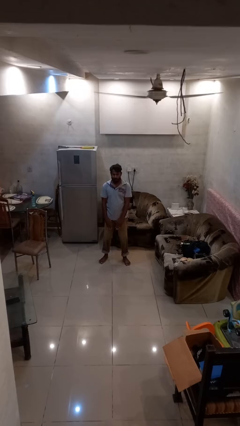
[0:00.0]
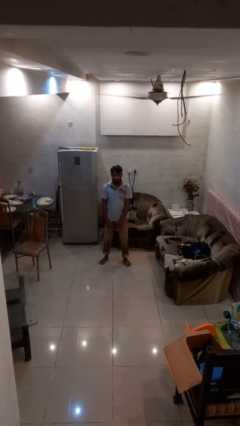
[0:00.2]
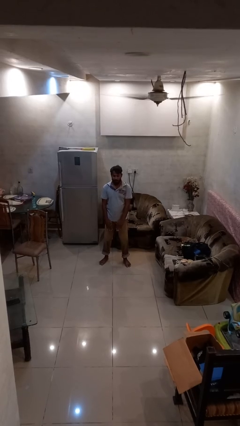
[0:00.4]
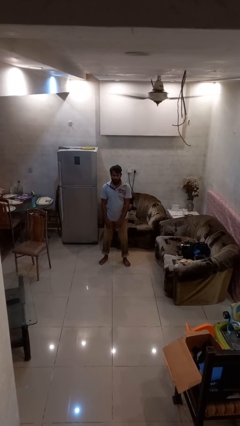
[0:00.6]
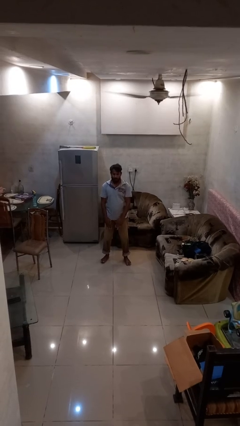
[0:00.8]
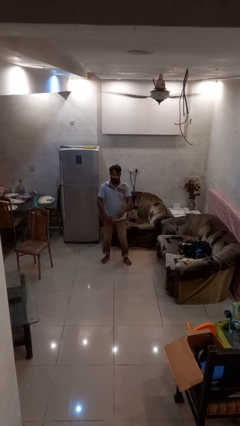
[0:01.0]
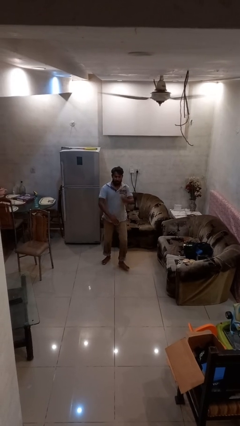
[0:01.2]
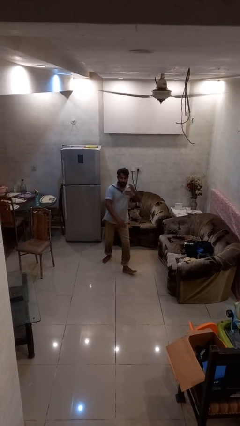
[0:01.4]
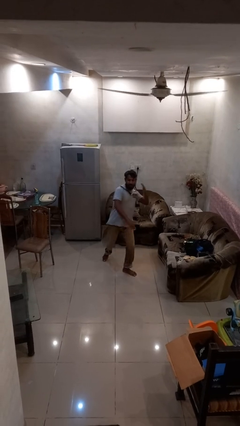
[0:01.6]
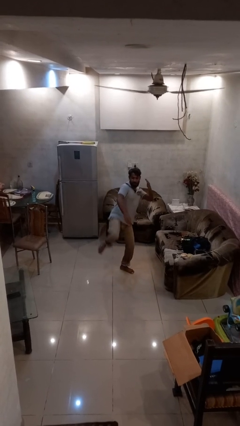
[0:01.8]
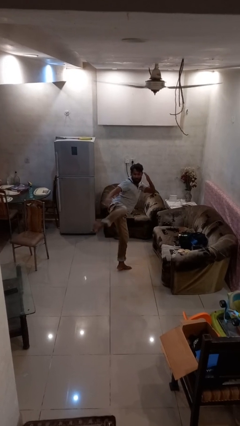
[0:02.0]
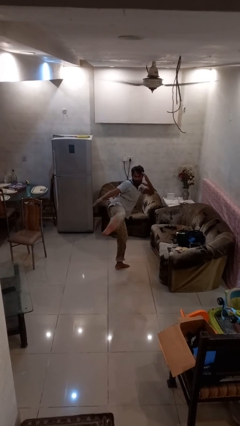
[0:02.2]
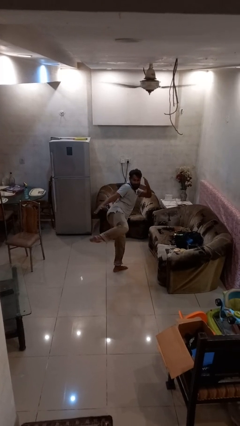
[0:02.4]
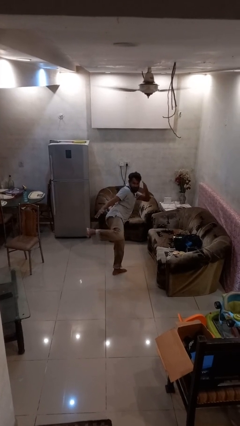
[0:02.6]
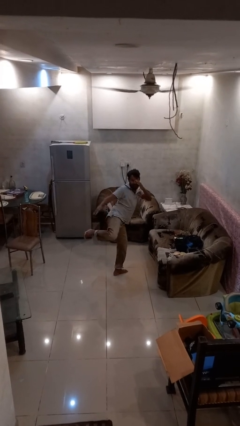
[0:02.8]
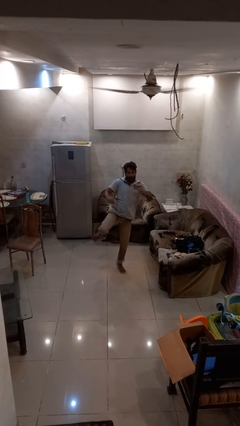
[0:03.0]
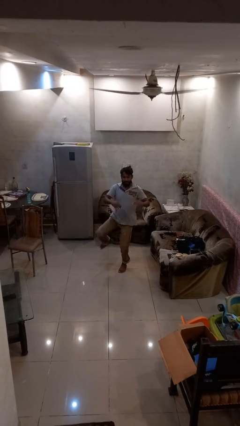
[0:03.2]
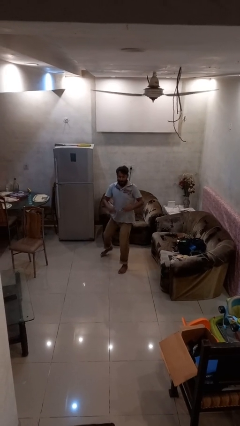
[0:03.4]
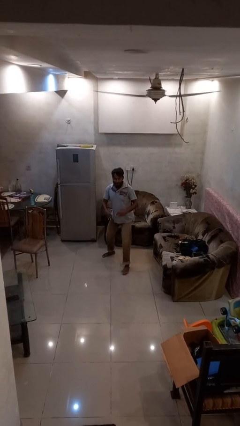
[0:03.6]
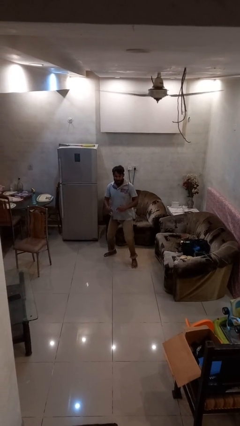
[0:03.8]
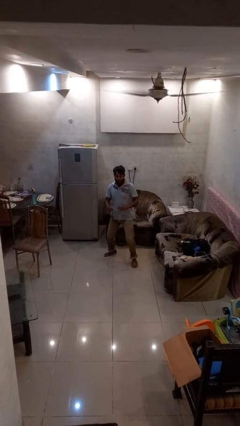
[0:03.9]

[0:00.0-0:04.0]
person karate kicks

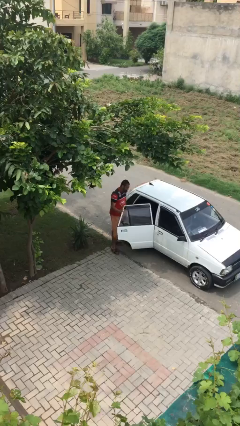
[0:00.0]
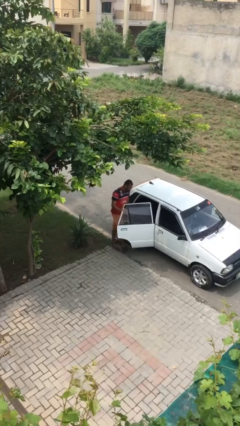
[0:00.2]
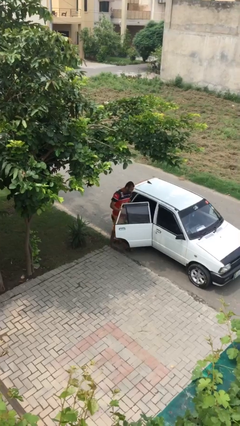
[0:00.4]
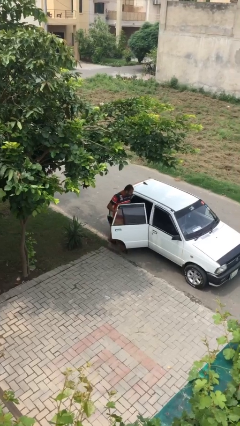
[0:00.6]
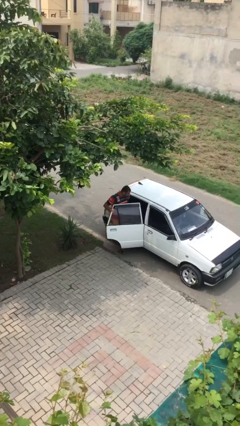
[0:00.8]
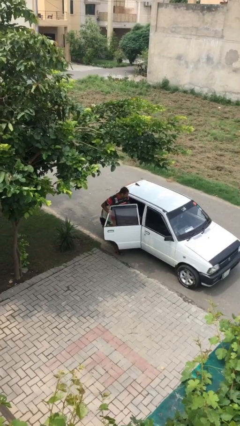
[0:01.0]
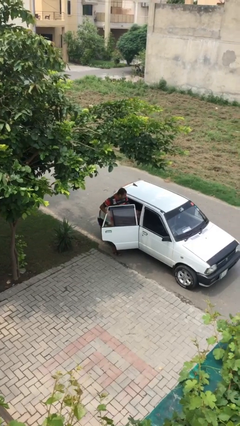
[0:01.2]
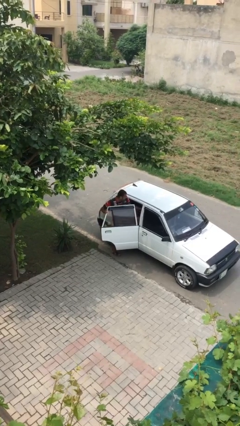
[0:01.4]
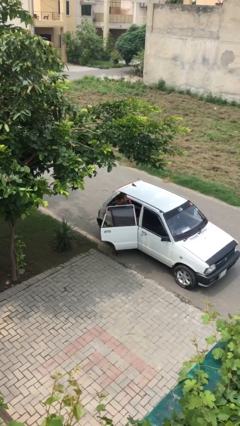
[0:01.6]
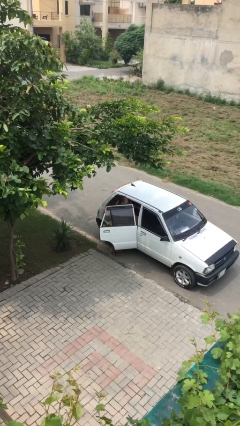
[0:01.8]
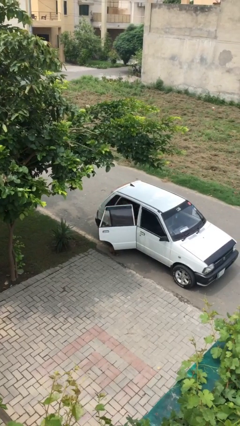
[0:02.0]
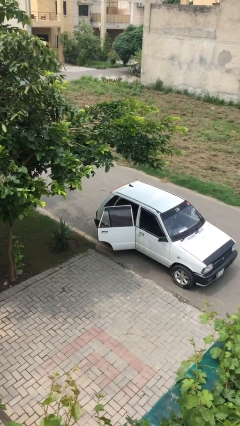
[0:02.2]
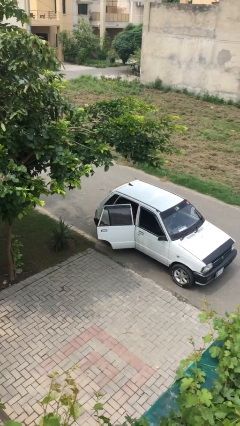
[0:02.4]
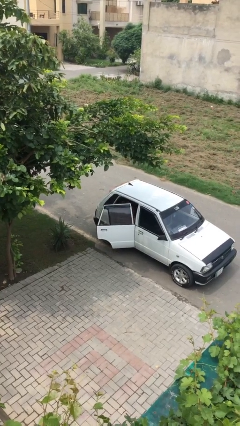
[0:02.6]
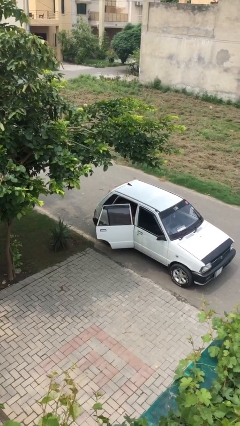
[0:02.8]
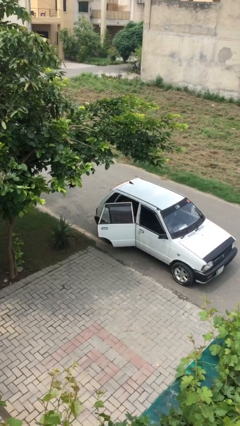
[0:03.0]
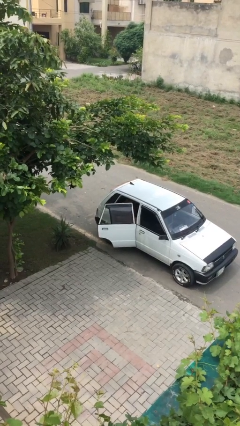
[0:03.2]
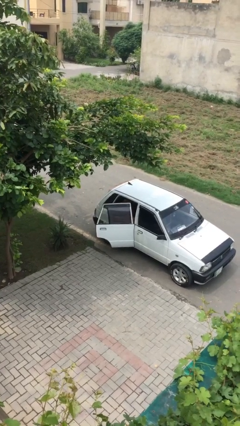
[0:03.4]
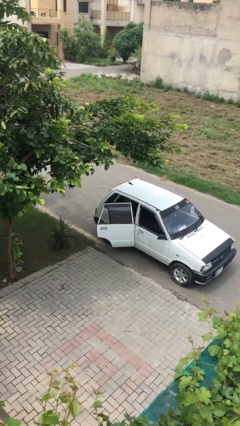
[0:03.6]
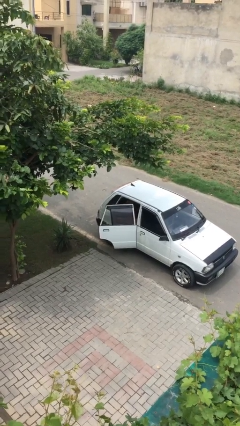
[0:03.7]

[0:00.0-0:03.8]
person enters car

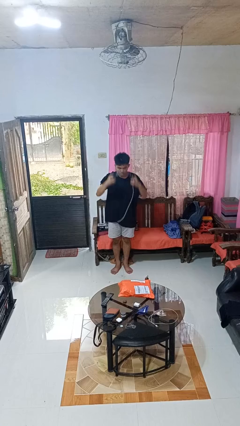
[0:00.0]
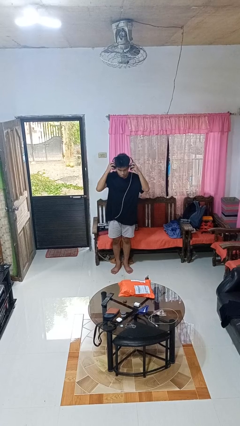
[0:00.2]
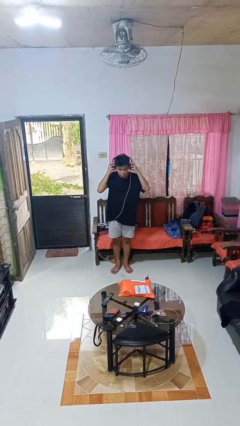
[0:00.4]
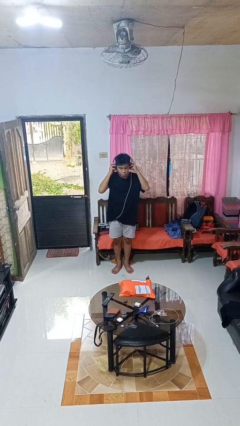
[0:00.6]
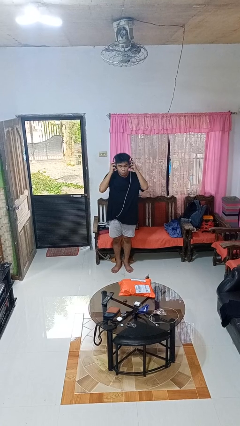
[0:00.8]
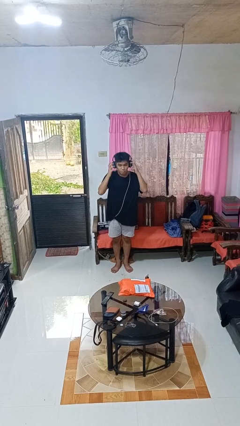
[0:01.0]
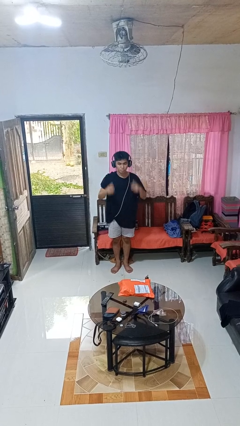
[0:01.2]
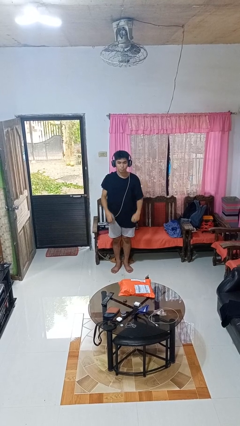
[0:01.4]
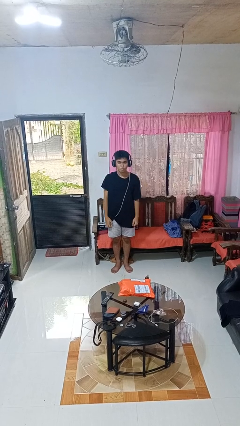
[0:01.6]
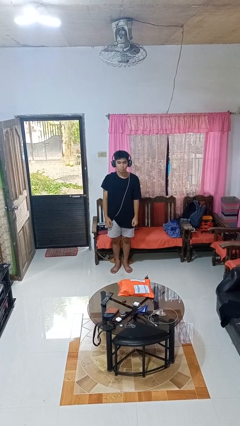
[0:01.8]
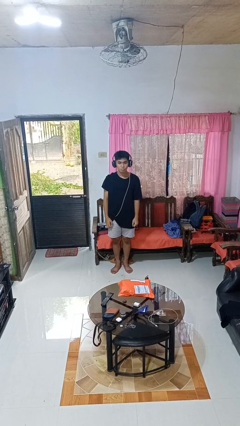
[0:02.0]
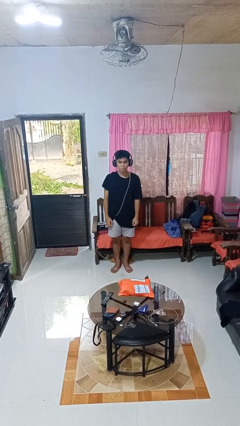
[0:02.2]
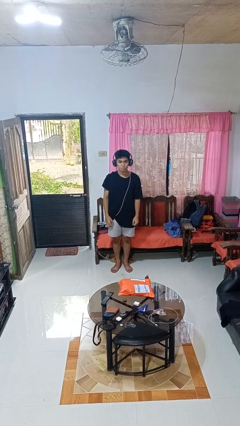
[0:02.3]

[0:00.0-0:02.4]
person puts on headphones

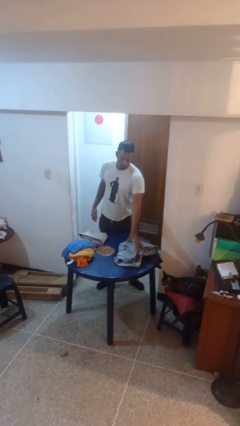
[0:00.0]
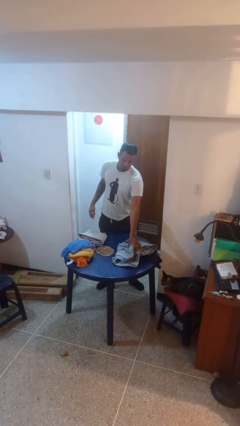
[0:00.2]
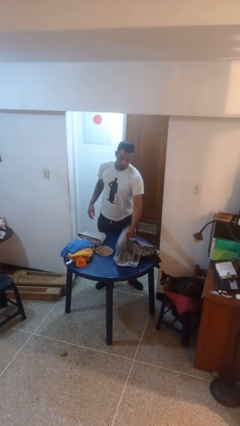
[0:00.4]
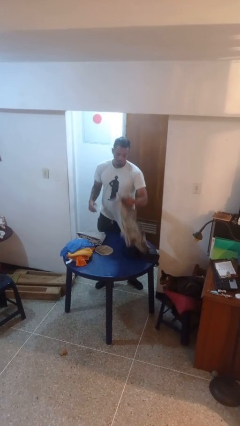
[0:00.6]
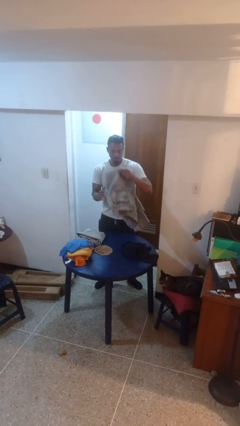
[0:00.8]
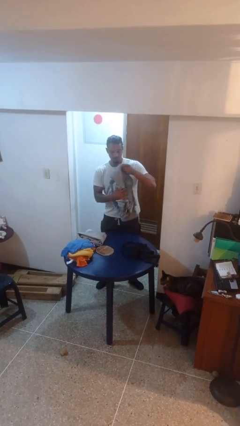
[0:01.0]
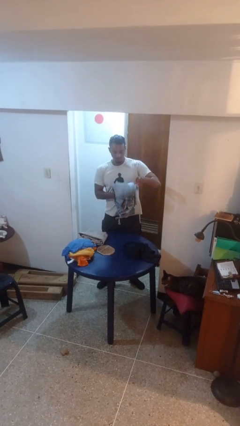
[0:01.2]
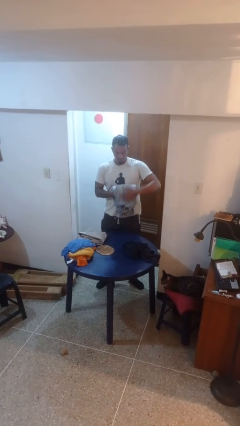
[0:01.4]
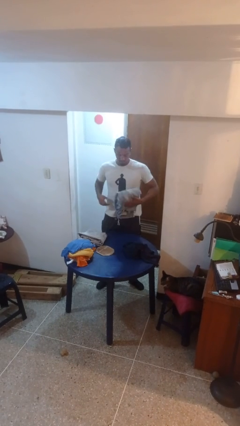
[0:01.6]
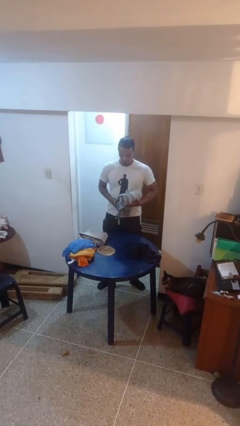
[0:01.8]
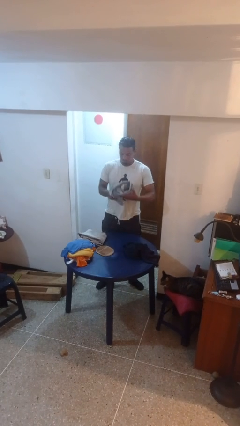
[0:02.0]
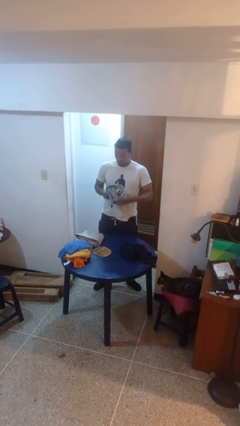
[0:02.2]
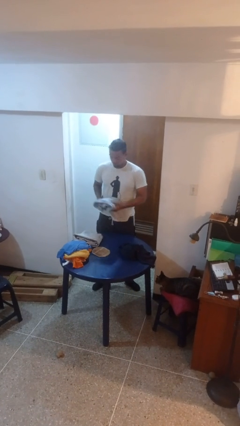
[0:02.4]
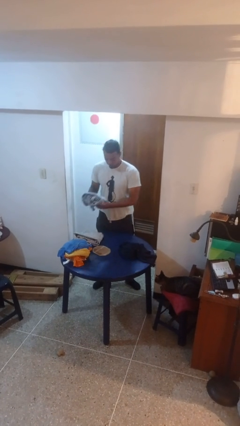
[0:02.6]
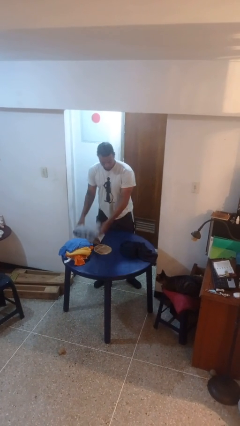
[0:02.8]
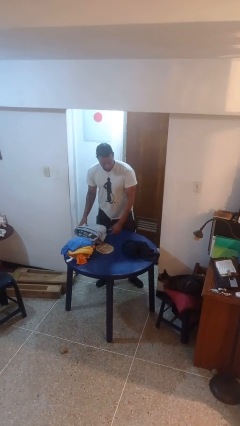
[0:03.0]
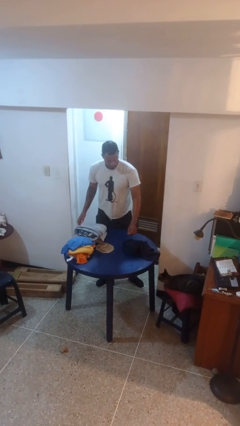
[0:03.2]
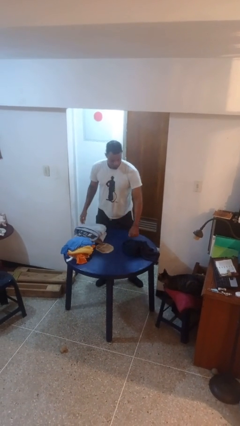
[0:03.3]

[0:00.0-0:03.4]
person folds pants

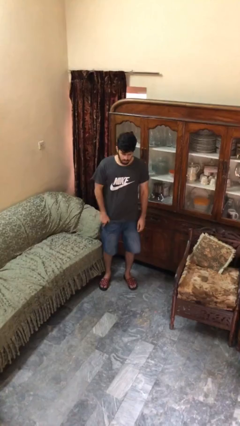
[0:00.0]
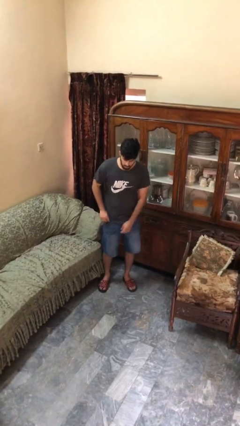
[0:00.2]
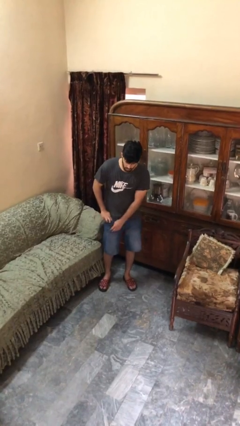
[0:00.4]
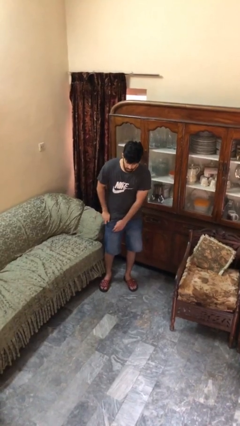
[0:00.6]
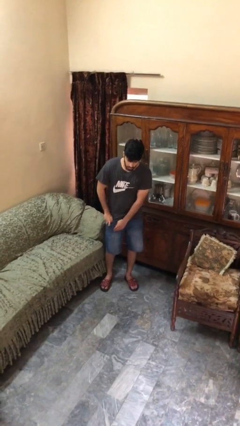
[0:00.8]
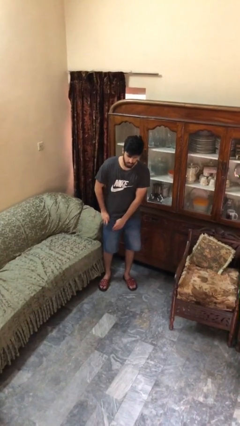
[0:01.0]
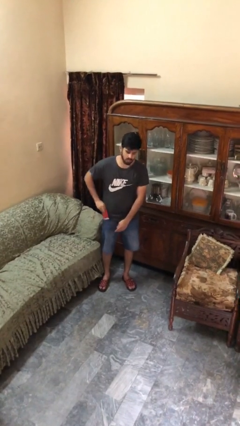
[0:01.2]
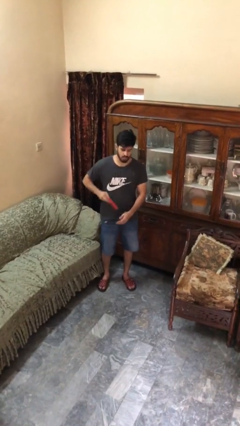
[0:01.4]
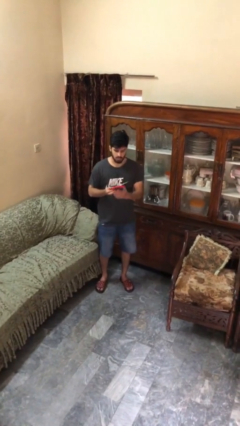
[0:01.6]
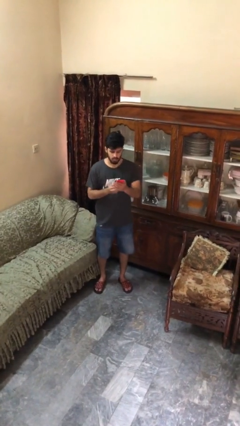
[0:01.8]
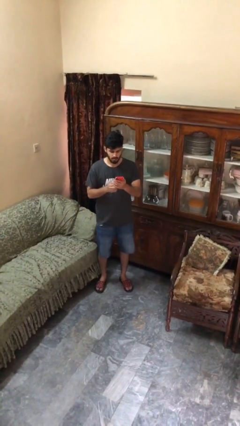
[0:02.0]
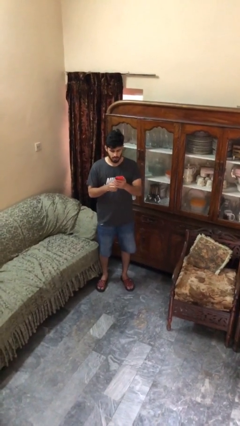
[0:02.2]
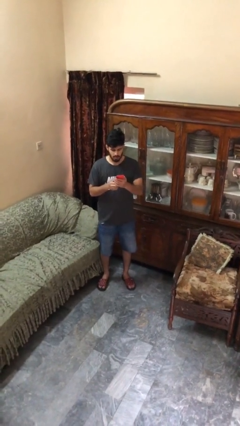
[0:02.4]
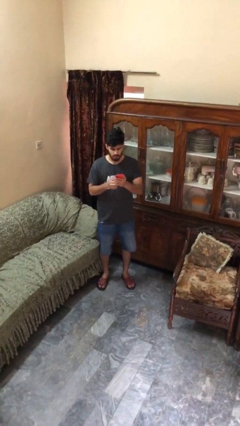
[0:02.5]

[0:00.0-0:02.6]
person takes phone from pocket

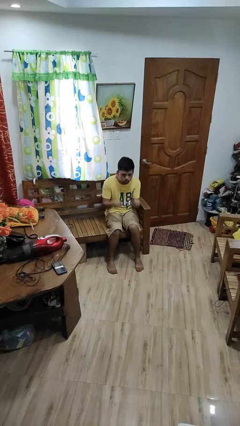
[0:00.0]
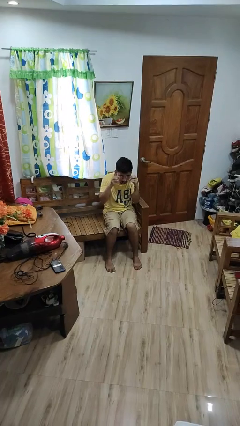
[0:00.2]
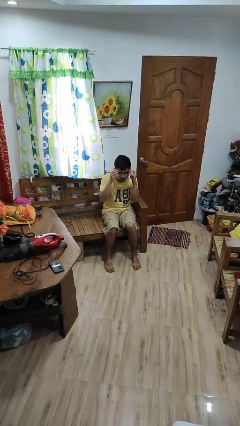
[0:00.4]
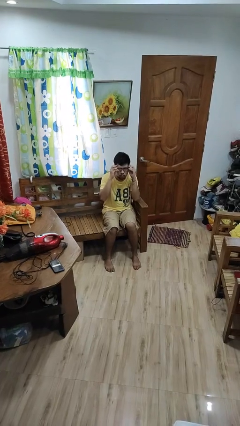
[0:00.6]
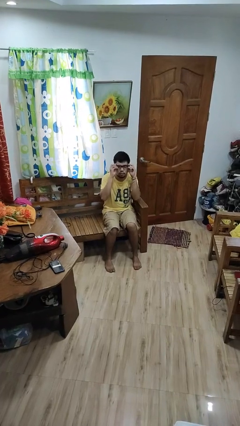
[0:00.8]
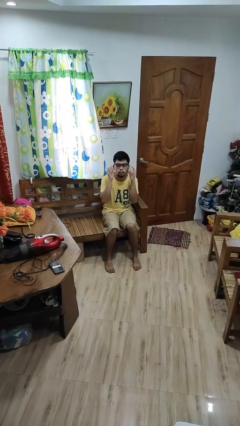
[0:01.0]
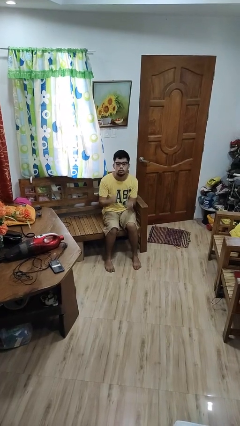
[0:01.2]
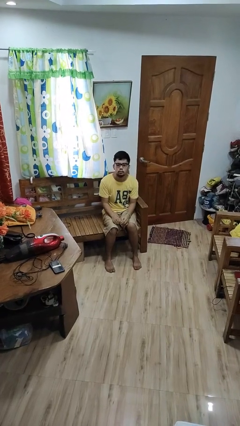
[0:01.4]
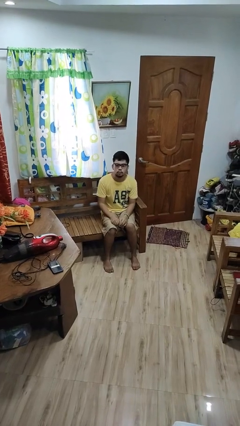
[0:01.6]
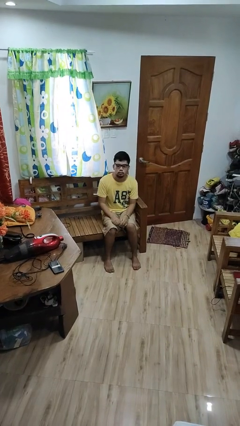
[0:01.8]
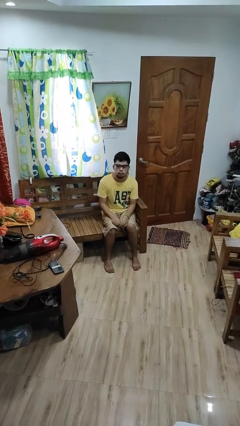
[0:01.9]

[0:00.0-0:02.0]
person puts on glasses
